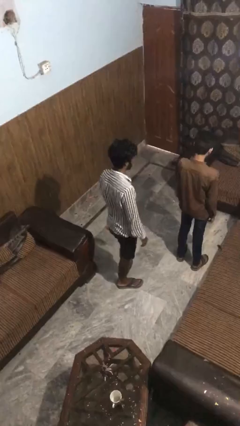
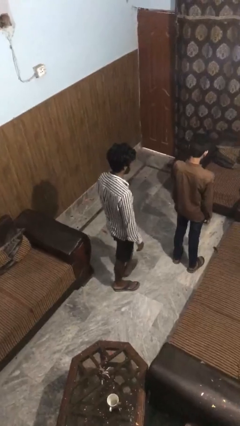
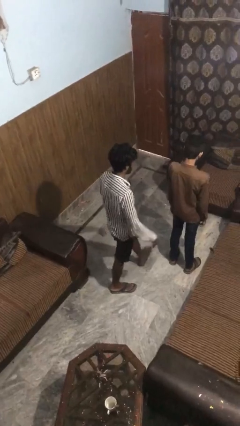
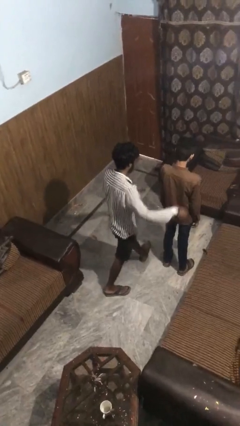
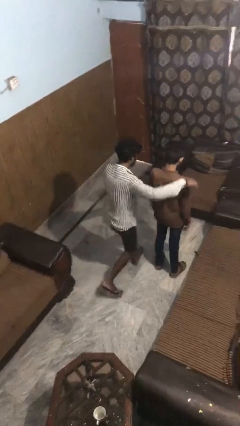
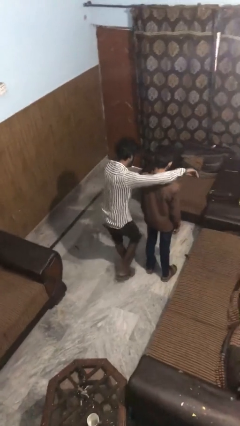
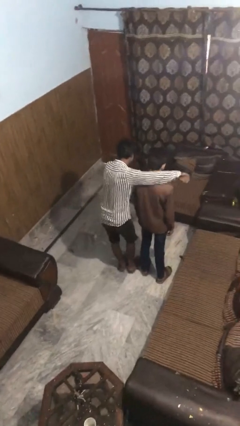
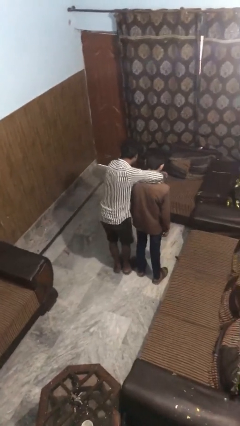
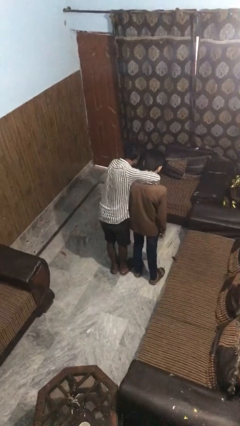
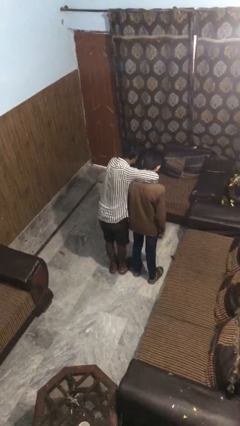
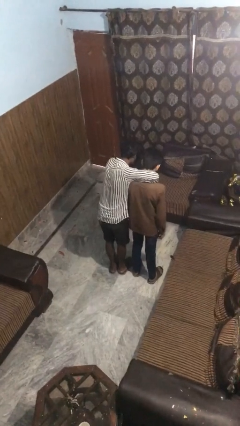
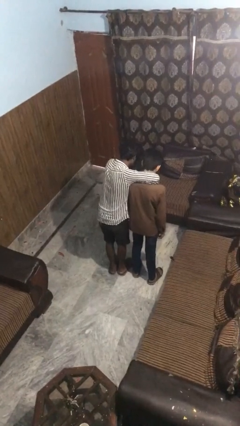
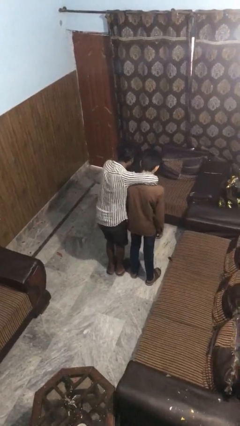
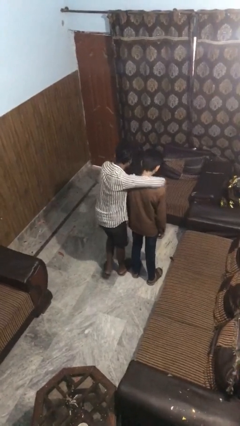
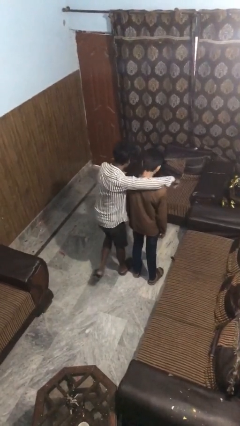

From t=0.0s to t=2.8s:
person hugs person from behind

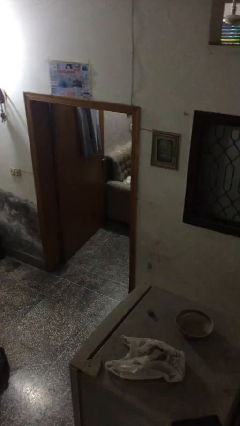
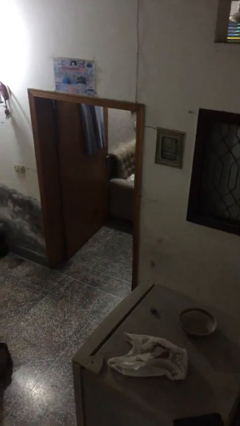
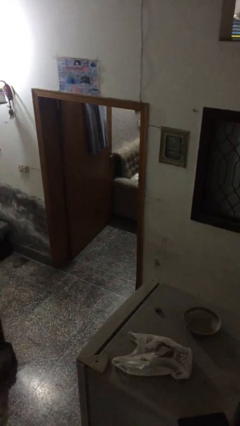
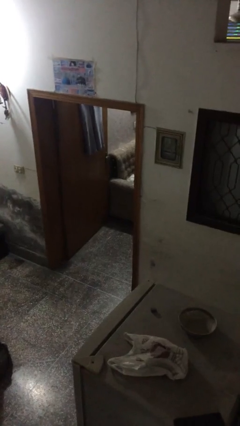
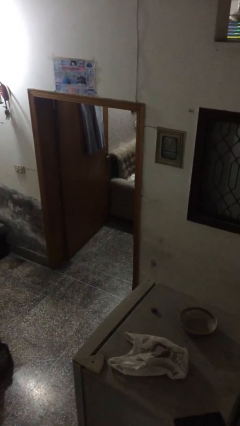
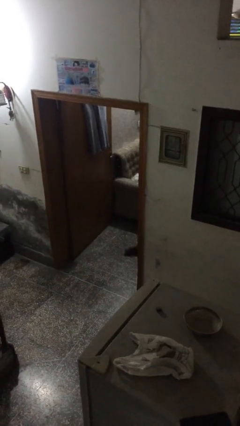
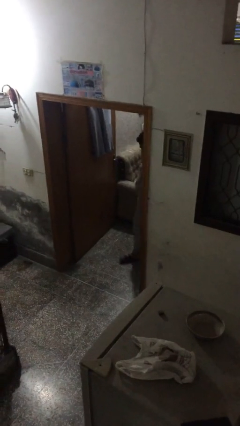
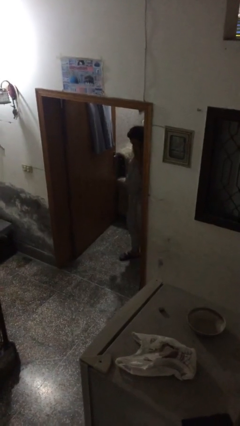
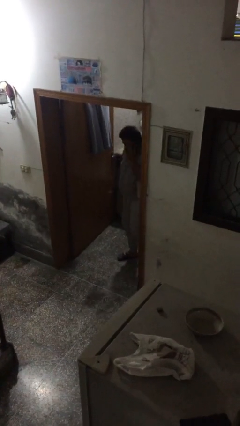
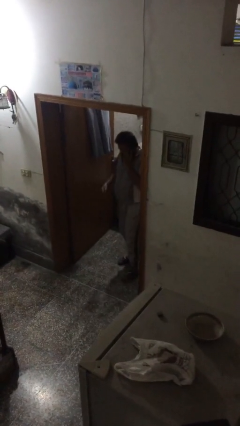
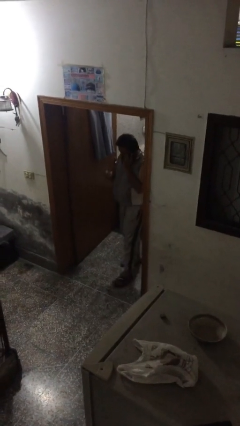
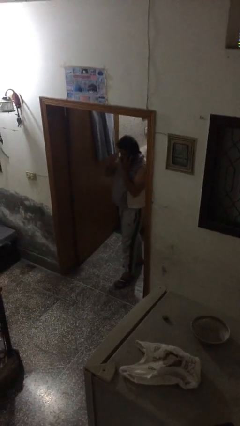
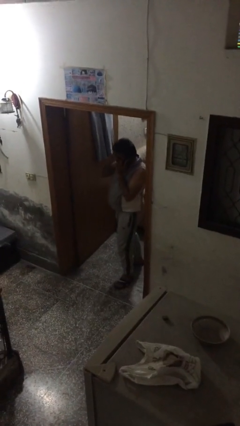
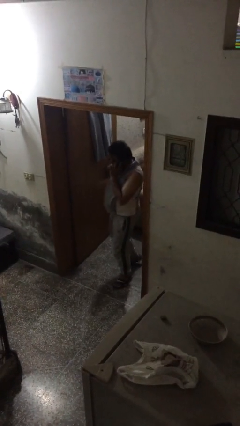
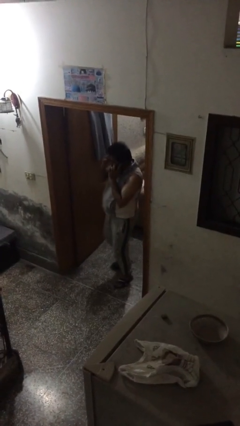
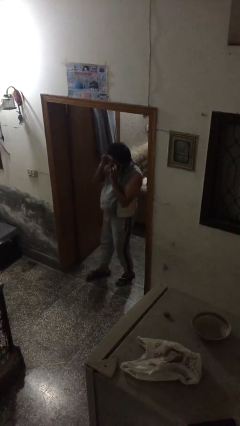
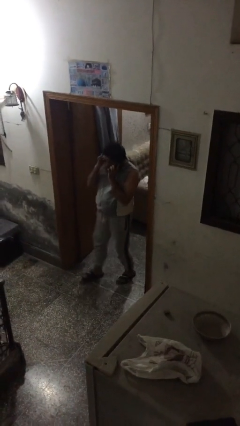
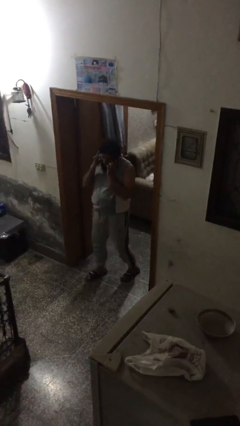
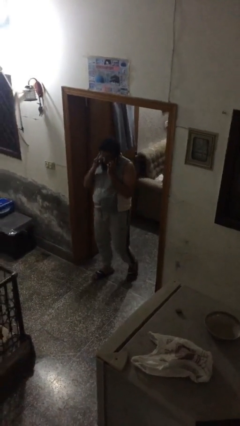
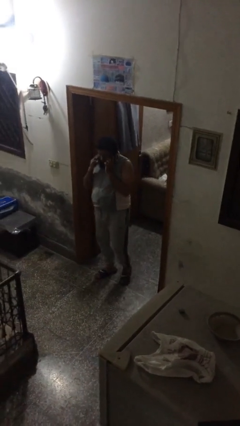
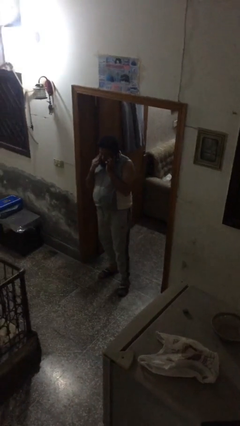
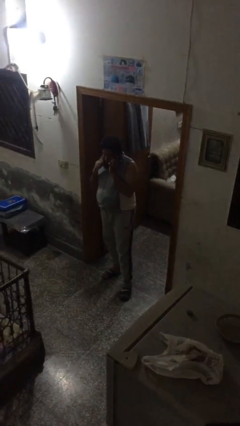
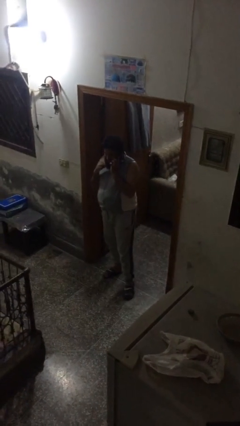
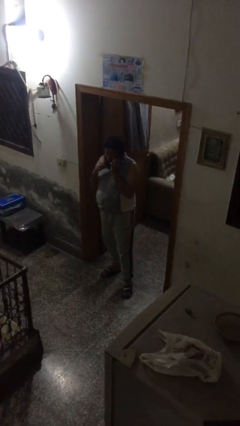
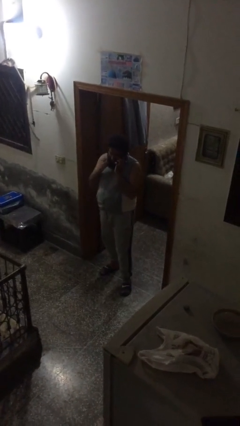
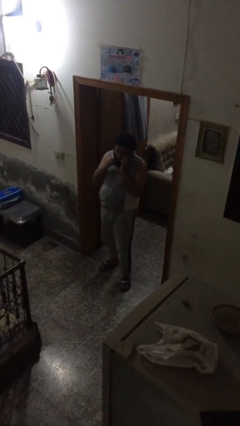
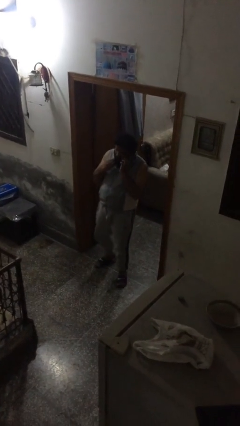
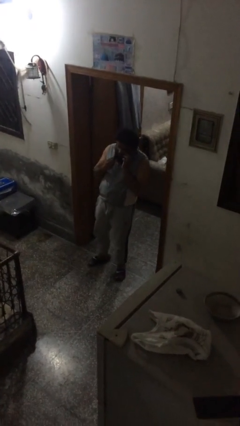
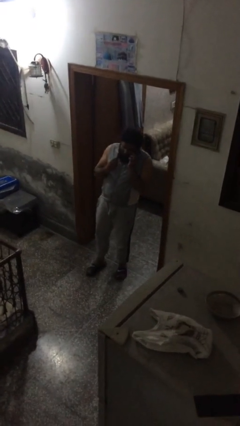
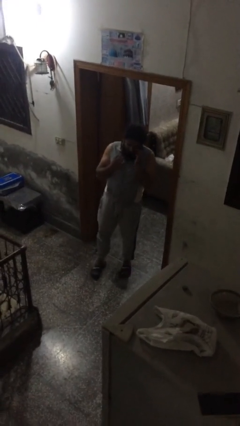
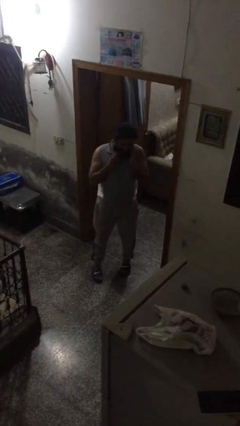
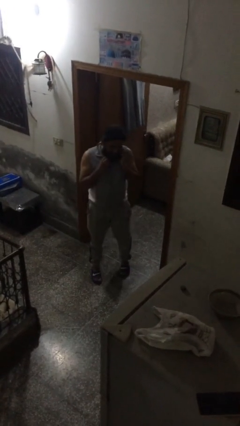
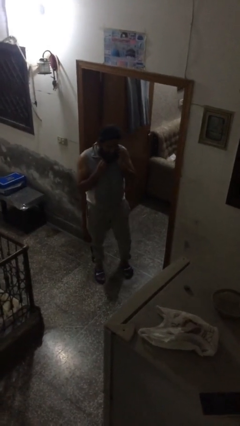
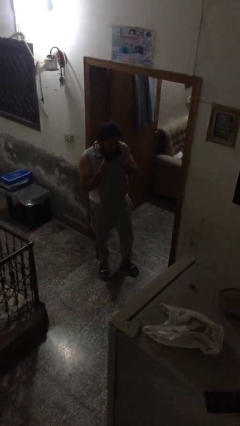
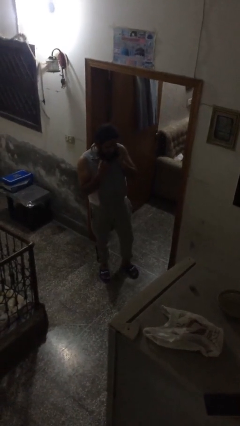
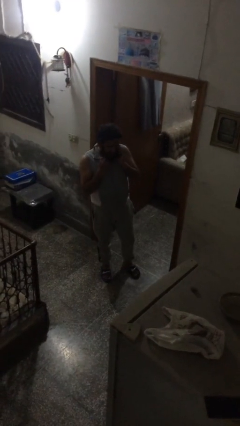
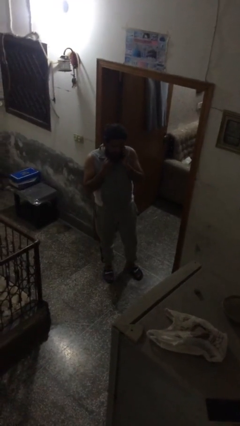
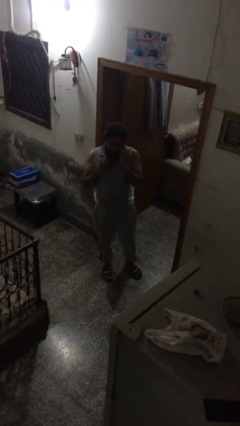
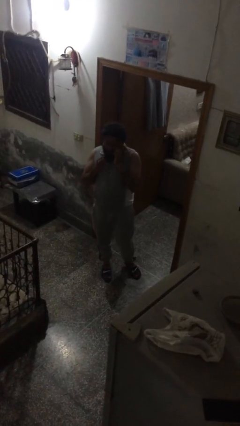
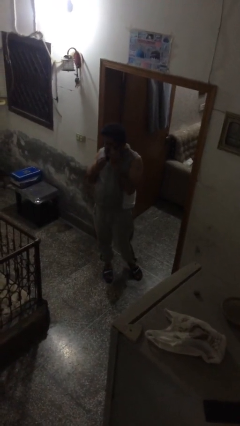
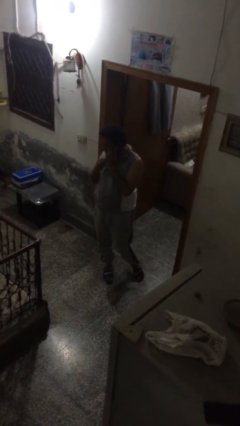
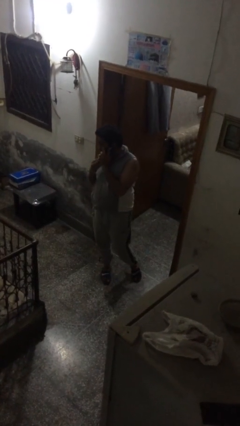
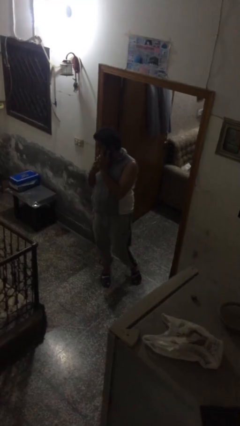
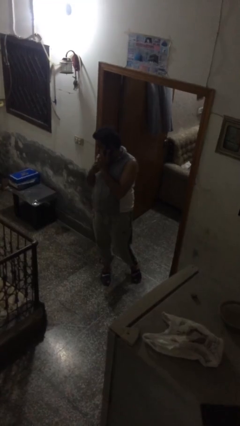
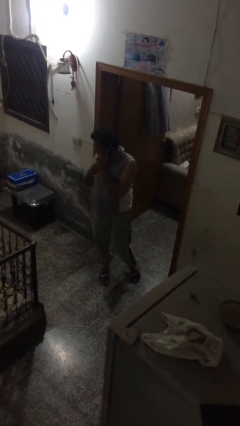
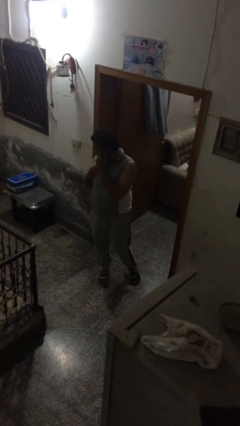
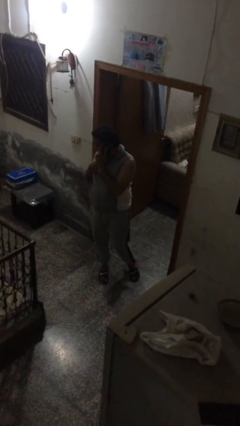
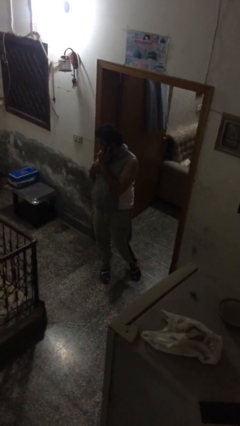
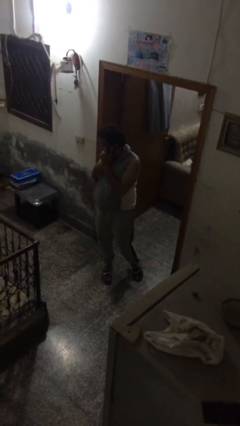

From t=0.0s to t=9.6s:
person enters scene through structure

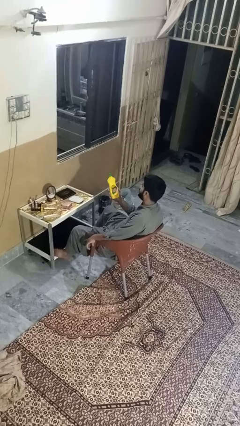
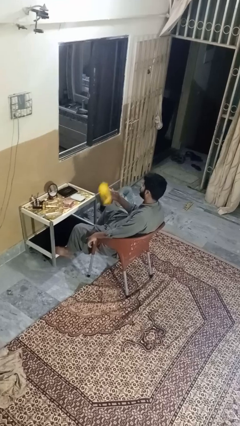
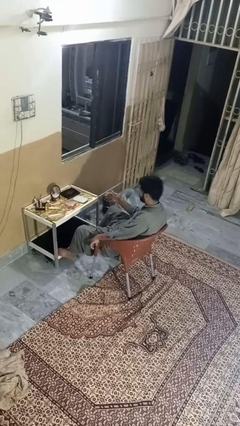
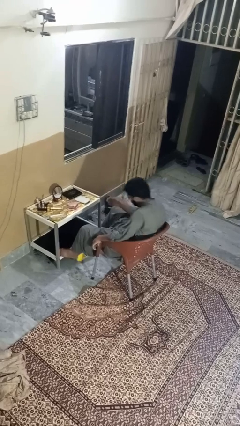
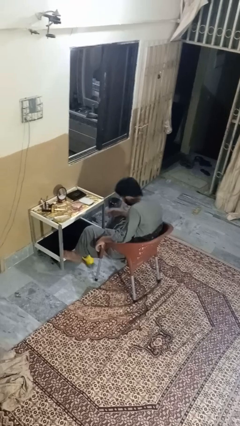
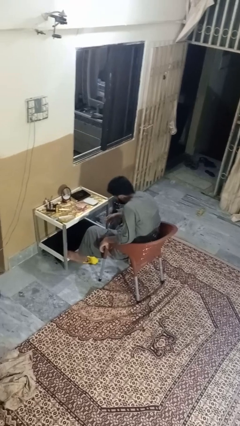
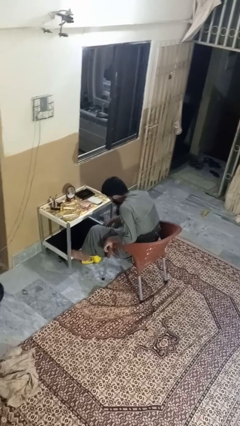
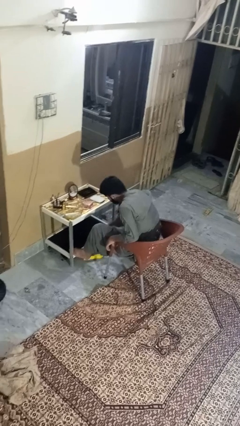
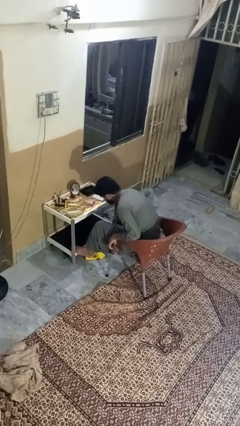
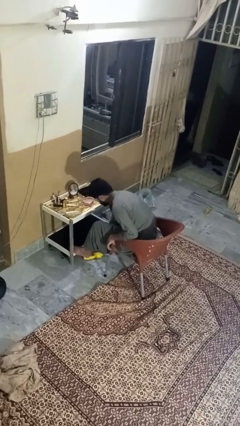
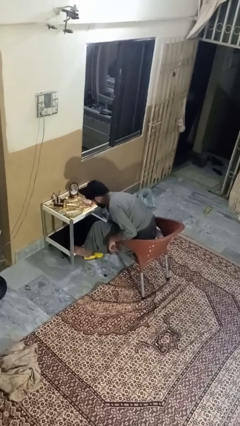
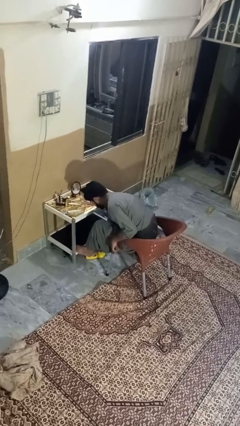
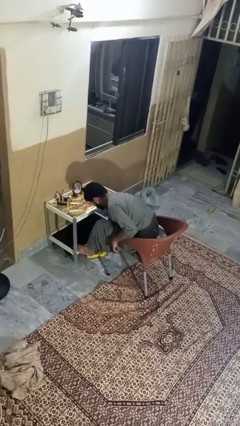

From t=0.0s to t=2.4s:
person throws object to ground

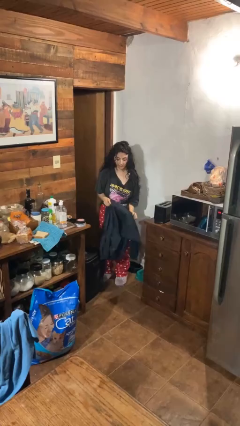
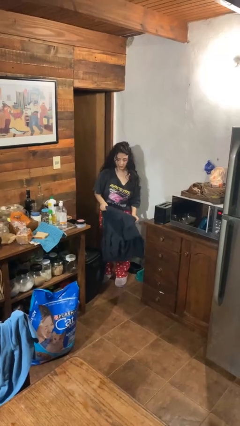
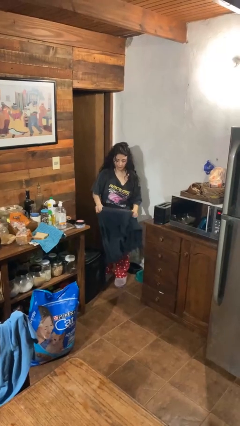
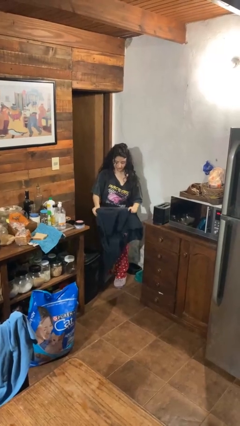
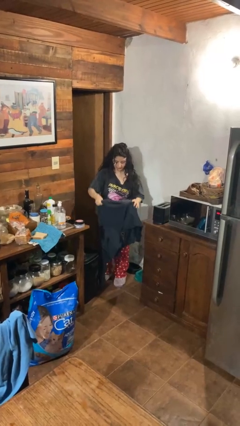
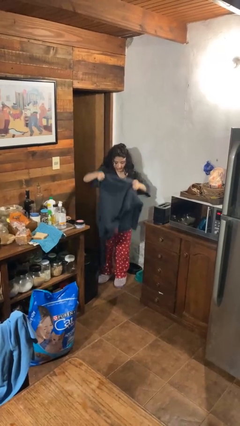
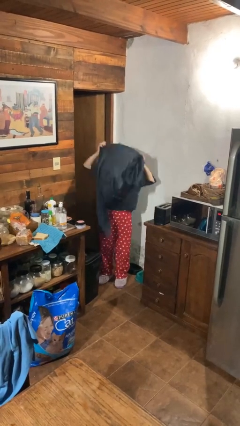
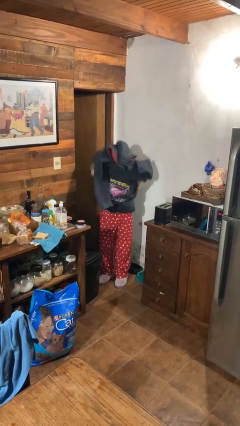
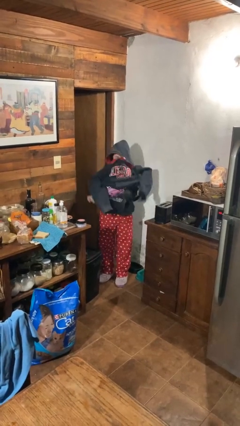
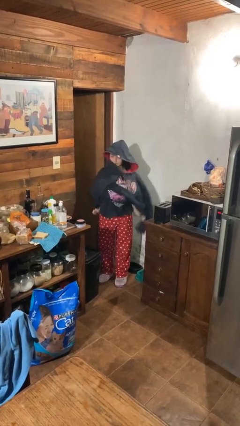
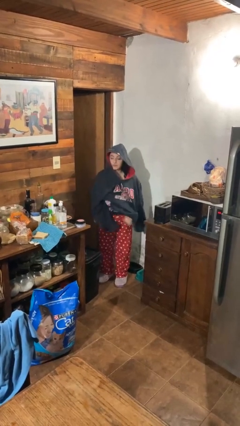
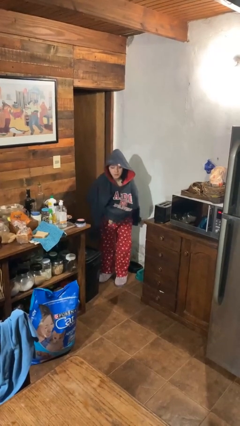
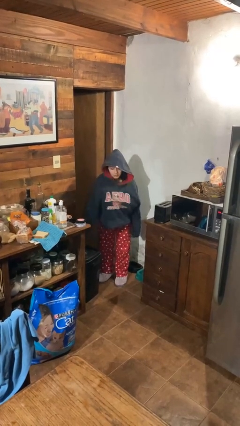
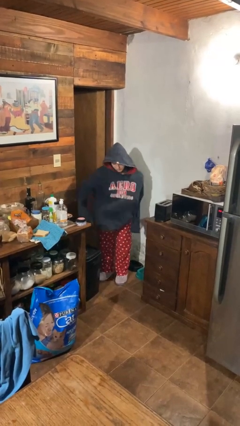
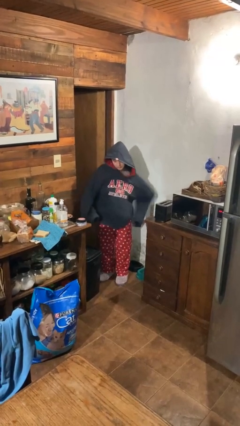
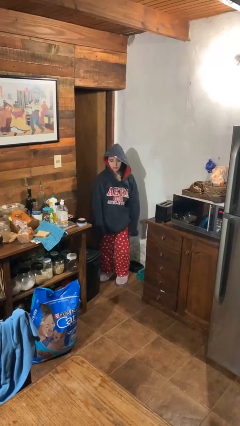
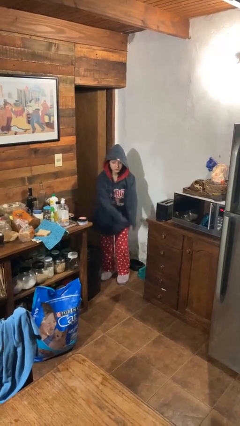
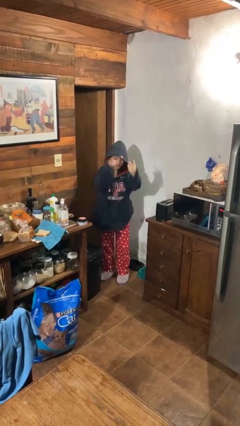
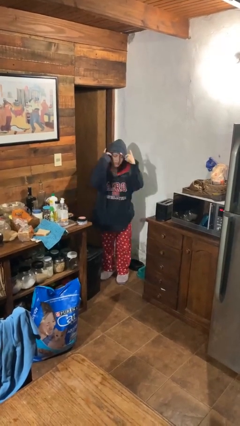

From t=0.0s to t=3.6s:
person puts on hoodie
